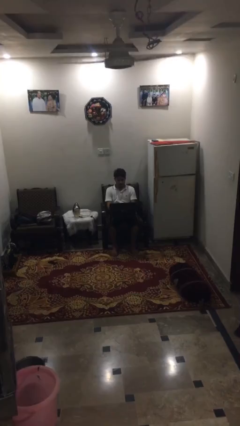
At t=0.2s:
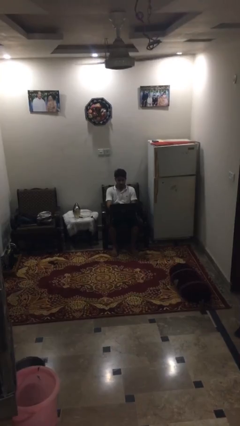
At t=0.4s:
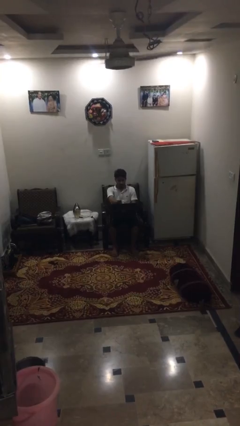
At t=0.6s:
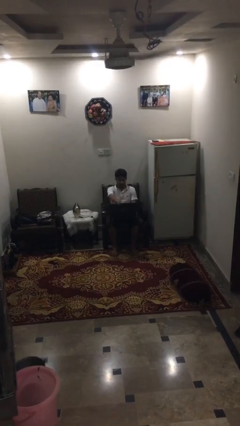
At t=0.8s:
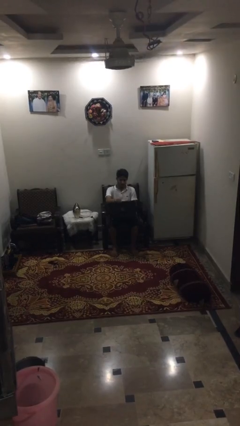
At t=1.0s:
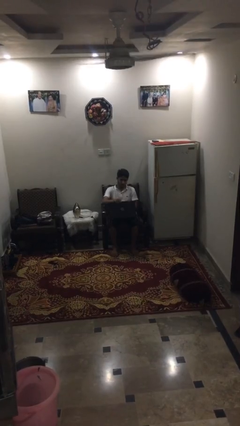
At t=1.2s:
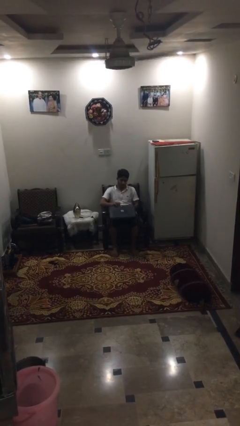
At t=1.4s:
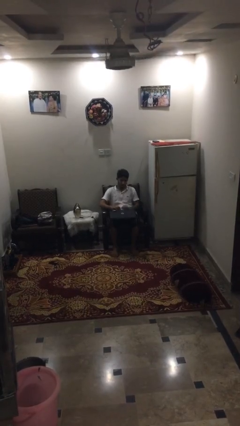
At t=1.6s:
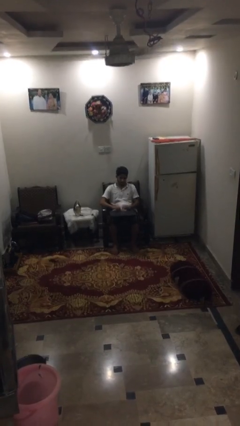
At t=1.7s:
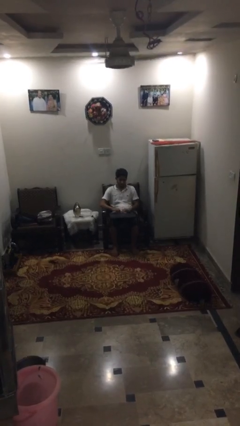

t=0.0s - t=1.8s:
person closes laptop

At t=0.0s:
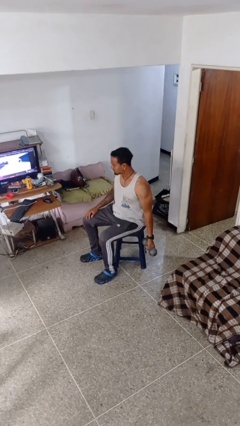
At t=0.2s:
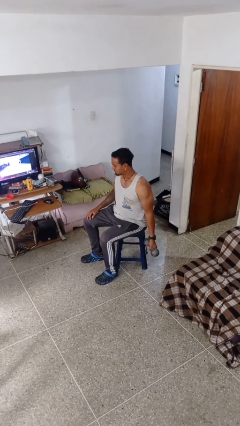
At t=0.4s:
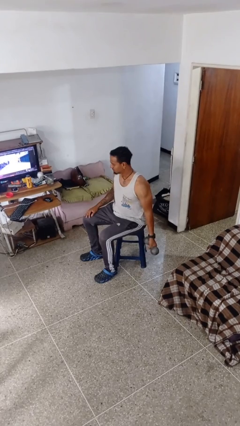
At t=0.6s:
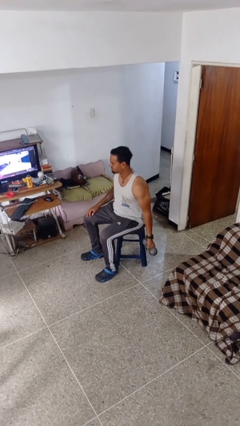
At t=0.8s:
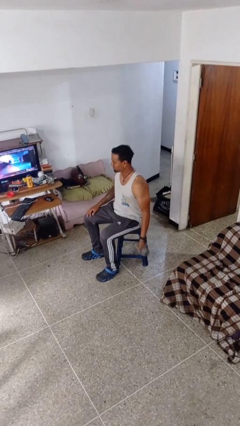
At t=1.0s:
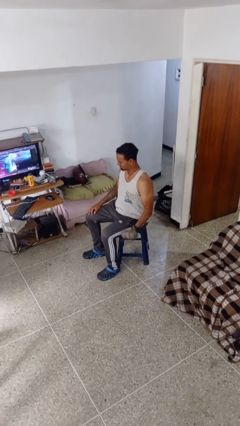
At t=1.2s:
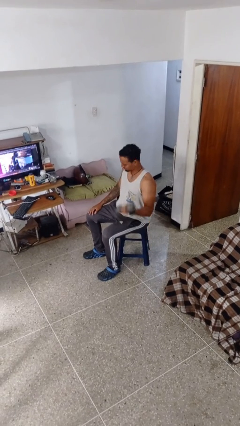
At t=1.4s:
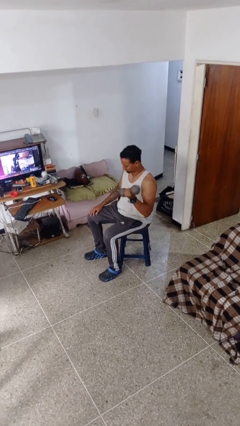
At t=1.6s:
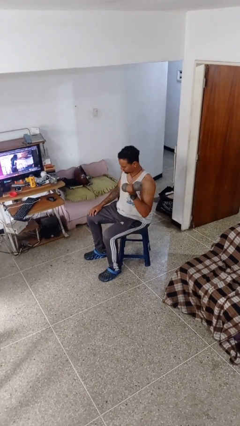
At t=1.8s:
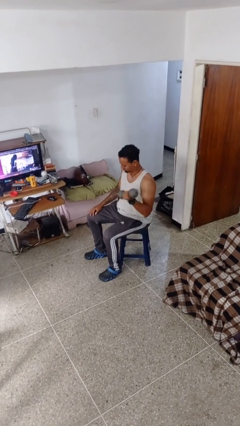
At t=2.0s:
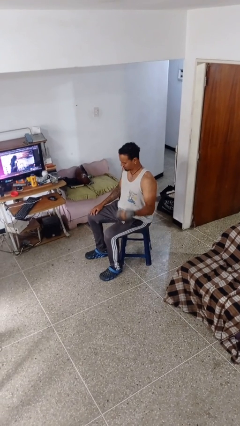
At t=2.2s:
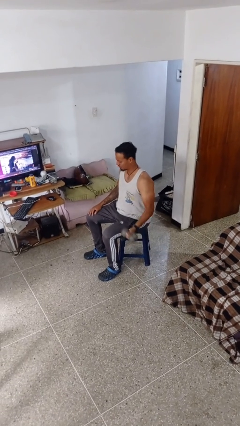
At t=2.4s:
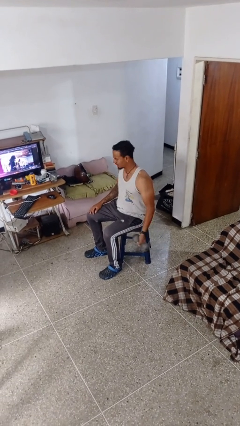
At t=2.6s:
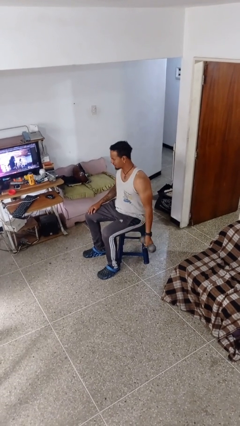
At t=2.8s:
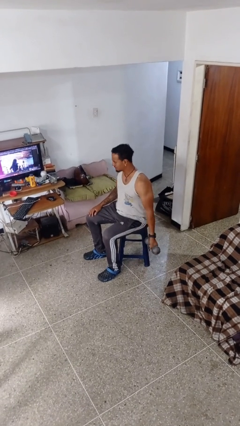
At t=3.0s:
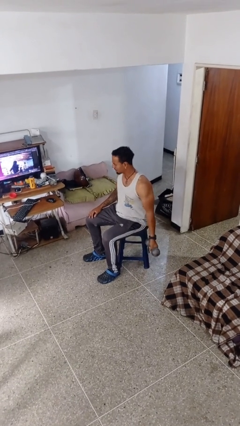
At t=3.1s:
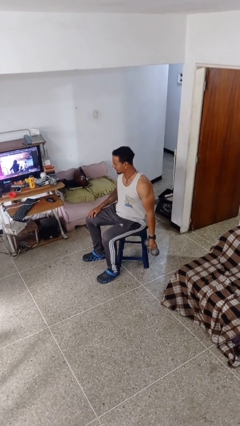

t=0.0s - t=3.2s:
person lifts dumbbells

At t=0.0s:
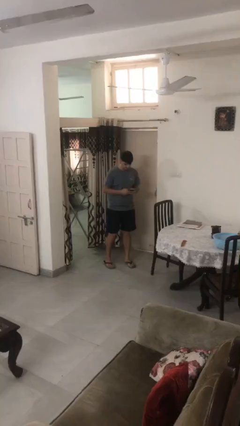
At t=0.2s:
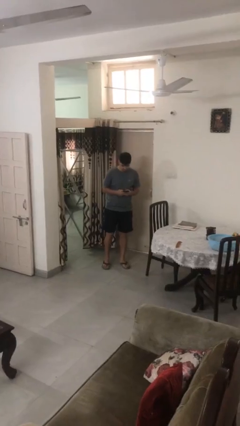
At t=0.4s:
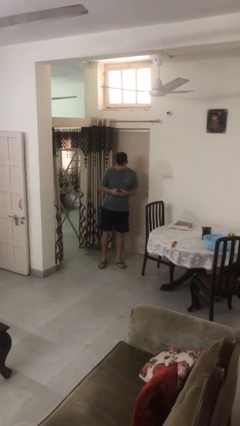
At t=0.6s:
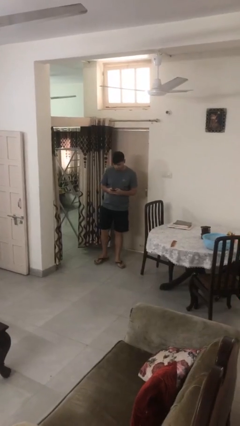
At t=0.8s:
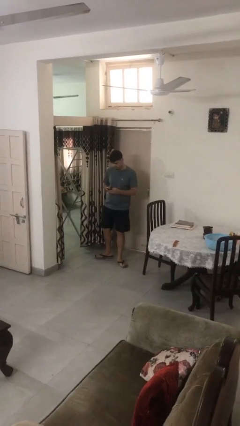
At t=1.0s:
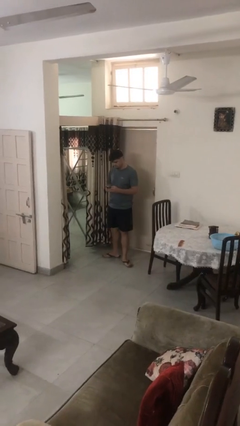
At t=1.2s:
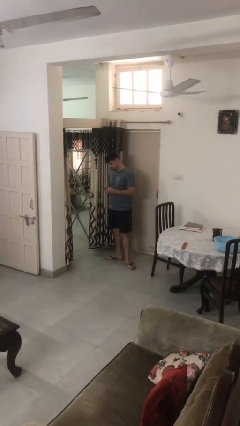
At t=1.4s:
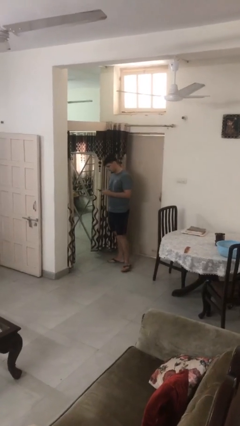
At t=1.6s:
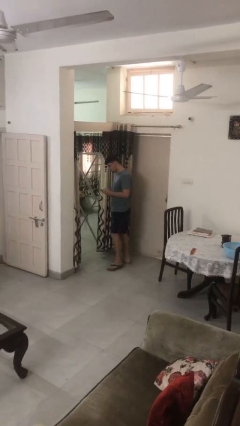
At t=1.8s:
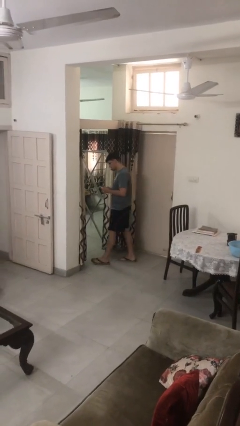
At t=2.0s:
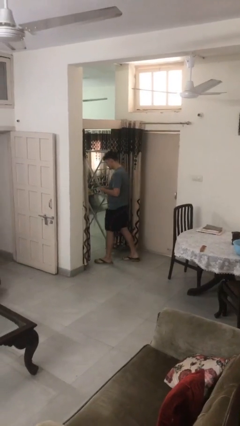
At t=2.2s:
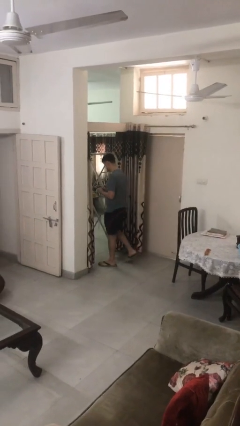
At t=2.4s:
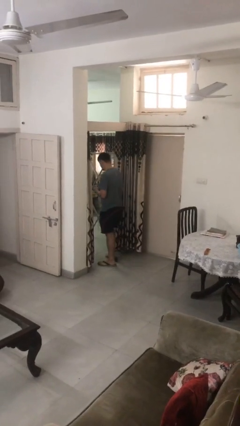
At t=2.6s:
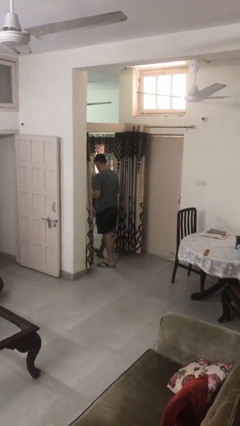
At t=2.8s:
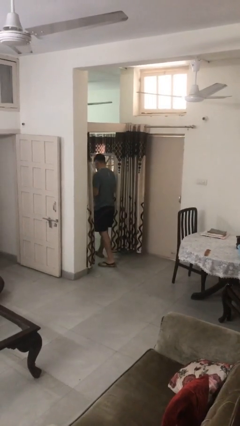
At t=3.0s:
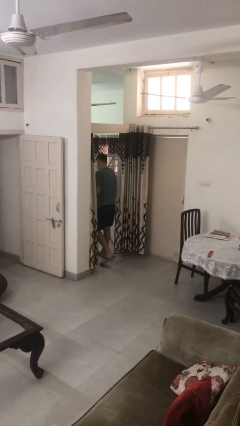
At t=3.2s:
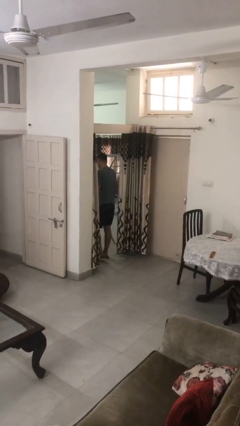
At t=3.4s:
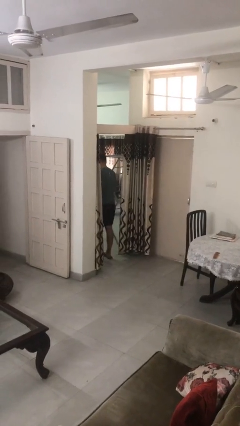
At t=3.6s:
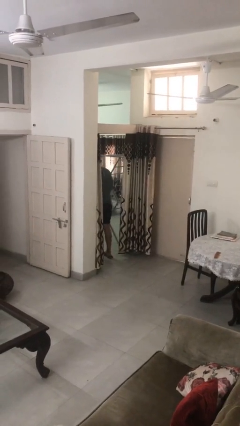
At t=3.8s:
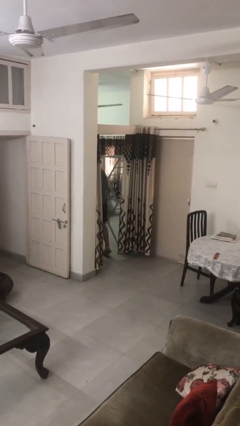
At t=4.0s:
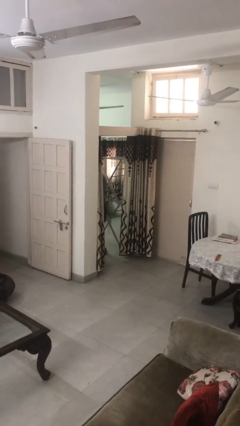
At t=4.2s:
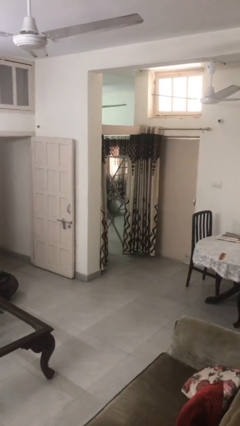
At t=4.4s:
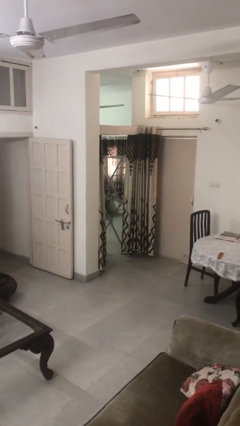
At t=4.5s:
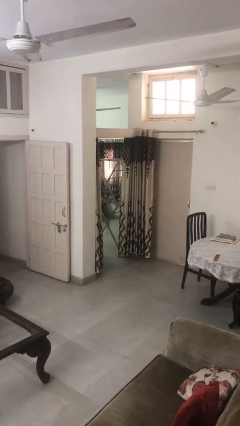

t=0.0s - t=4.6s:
person exits scene through structure

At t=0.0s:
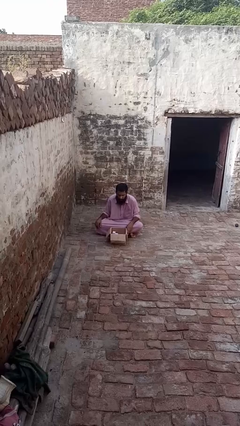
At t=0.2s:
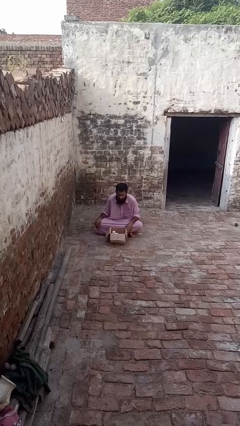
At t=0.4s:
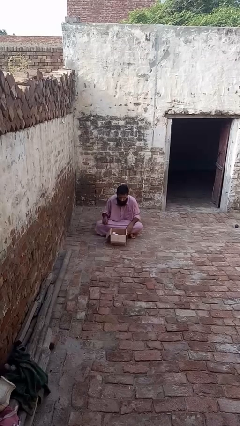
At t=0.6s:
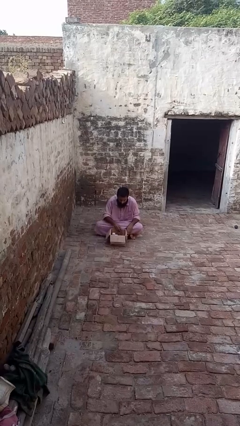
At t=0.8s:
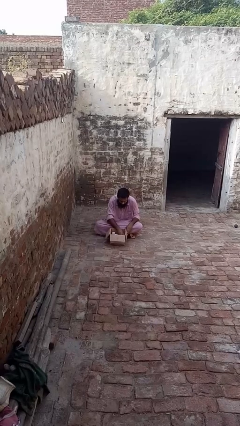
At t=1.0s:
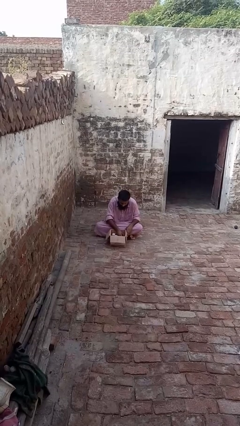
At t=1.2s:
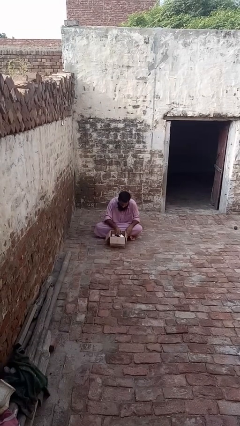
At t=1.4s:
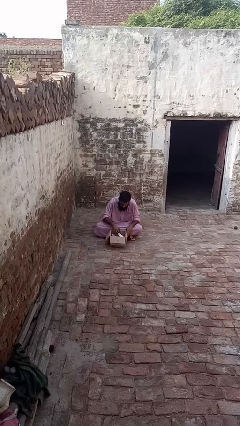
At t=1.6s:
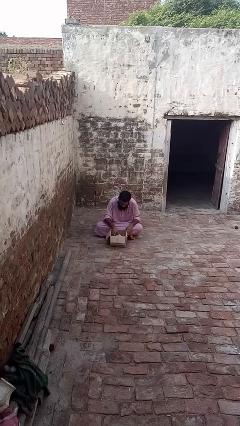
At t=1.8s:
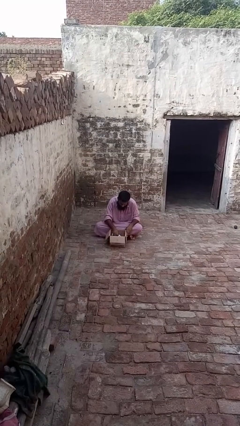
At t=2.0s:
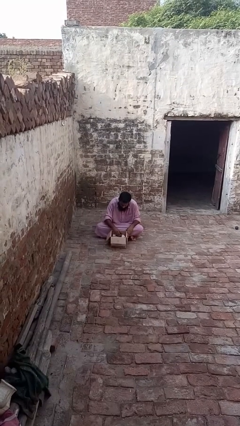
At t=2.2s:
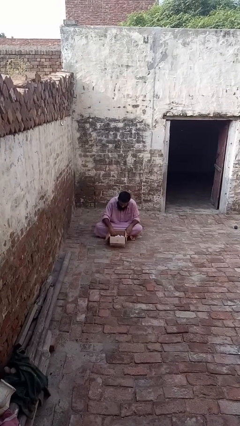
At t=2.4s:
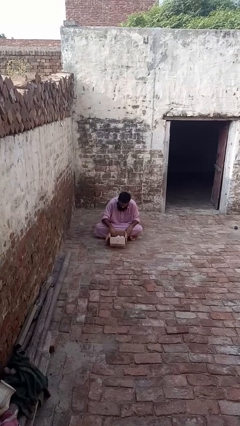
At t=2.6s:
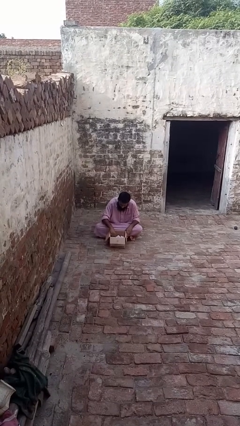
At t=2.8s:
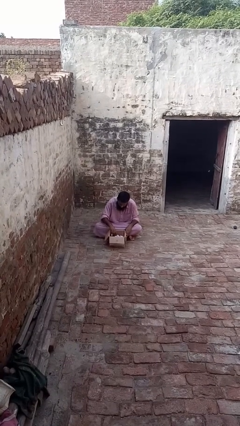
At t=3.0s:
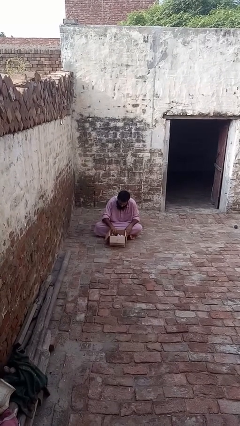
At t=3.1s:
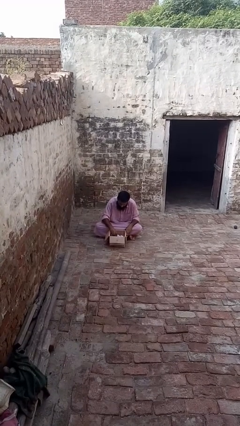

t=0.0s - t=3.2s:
person searches in box

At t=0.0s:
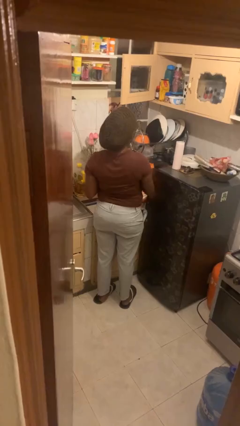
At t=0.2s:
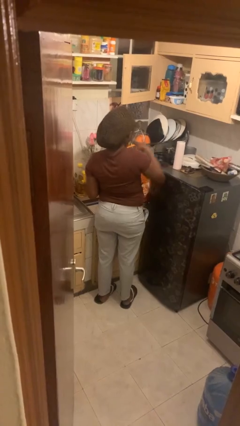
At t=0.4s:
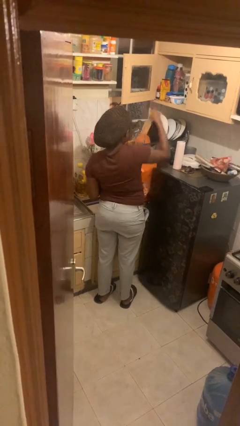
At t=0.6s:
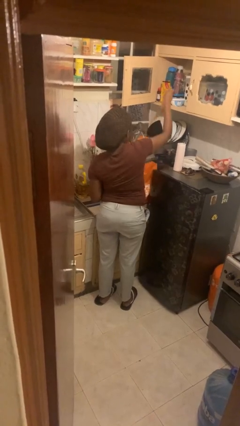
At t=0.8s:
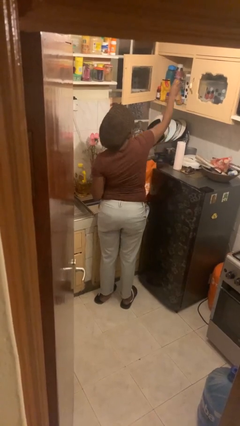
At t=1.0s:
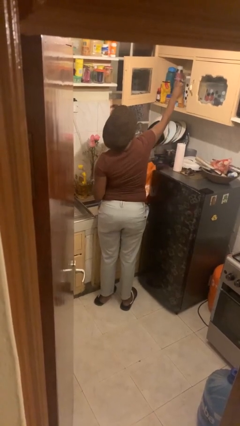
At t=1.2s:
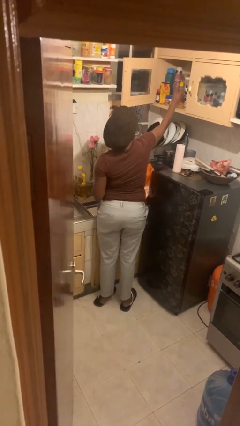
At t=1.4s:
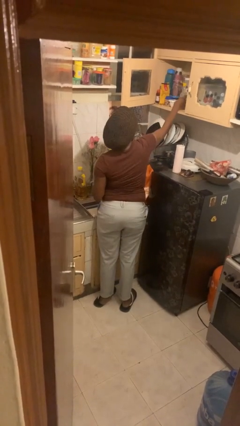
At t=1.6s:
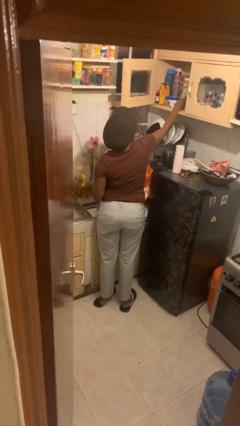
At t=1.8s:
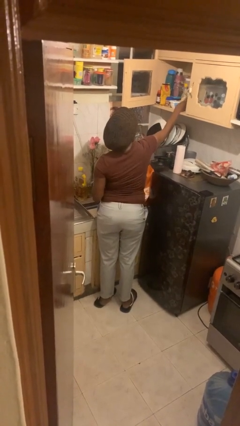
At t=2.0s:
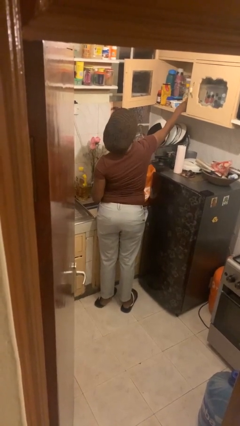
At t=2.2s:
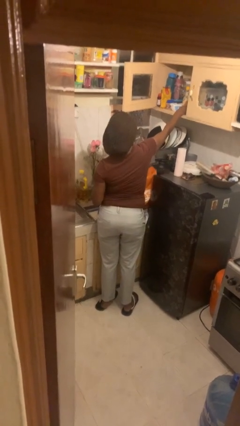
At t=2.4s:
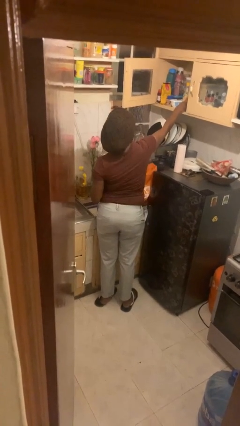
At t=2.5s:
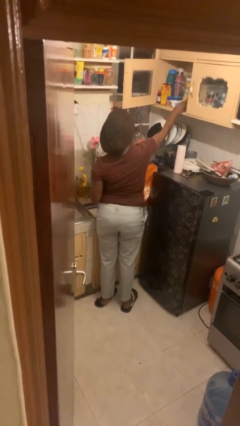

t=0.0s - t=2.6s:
person loads groceries into cabinet

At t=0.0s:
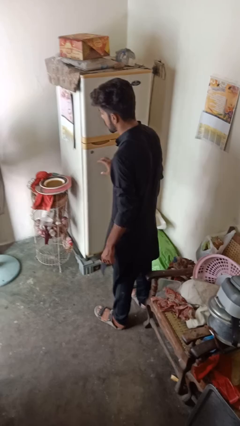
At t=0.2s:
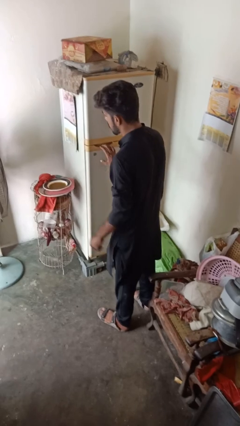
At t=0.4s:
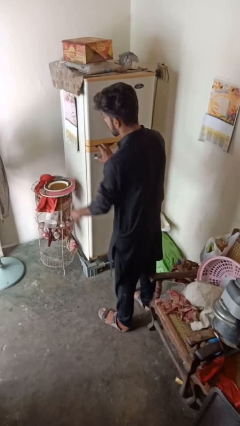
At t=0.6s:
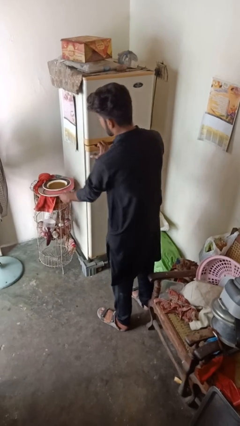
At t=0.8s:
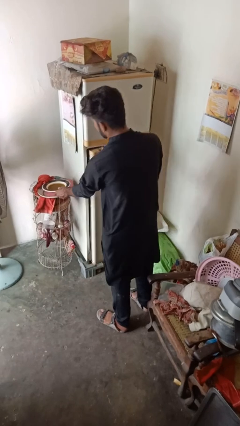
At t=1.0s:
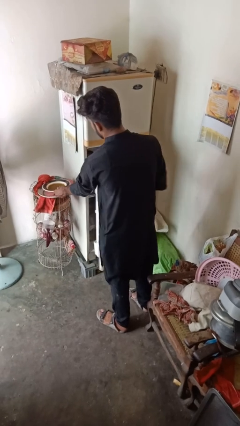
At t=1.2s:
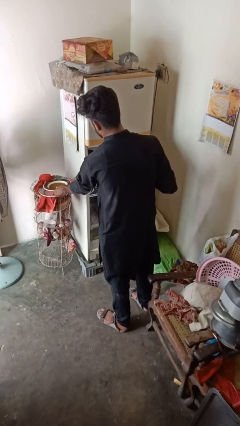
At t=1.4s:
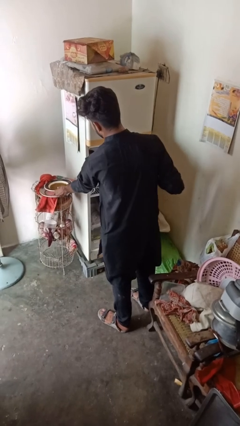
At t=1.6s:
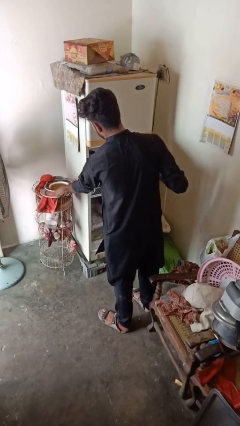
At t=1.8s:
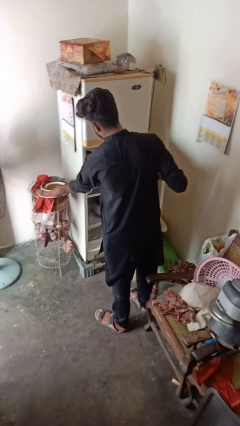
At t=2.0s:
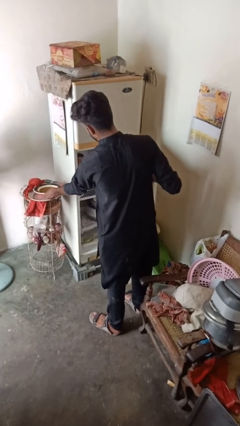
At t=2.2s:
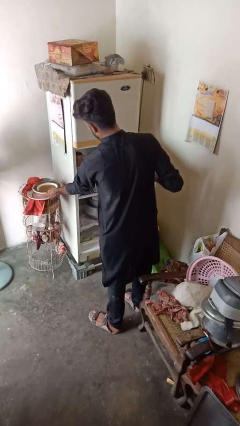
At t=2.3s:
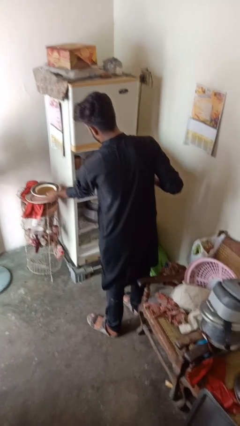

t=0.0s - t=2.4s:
person opens refrigerator
